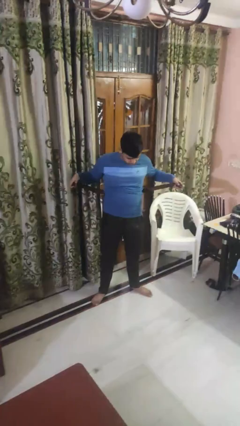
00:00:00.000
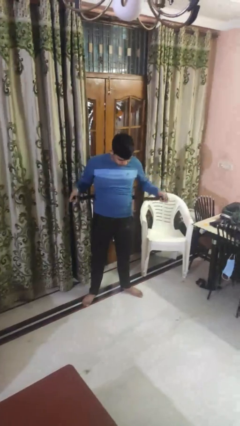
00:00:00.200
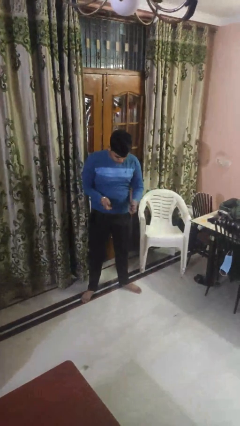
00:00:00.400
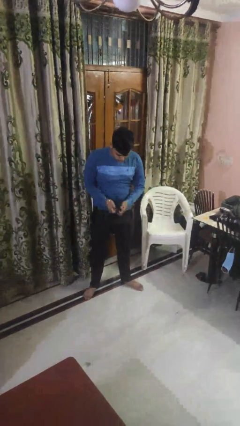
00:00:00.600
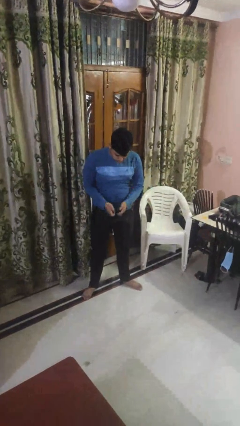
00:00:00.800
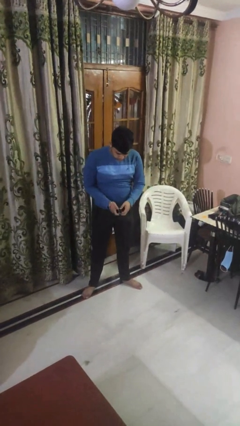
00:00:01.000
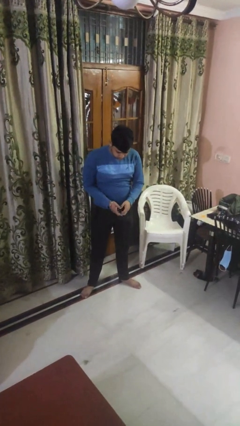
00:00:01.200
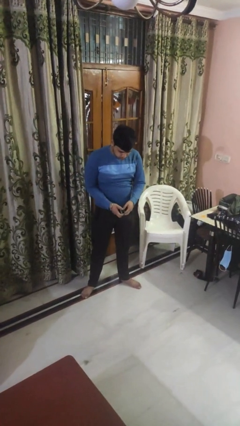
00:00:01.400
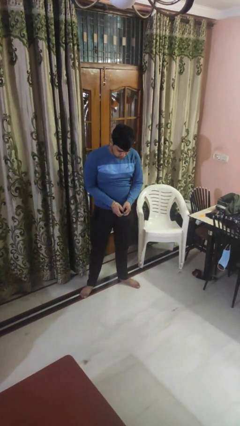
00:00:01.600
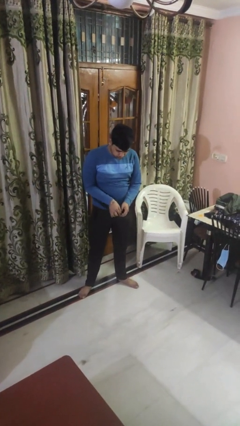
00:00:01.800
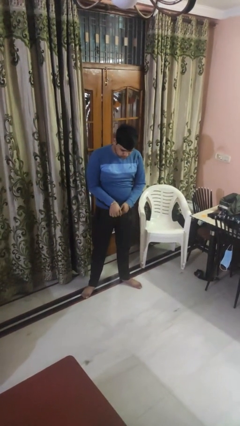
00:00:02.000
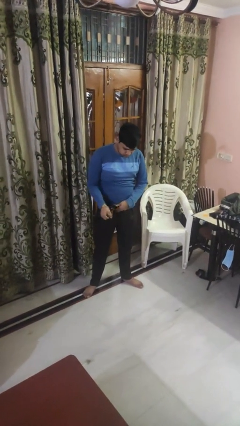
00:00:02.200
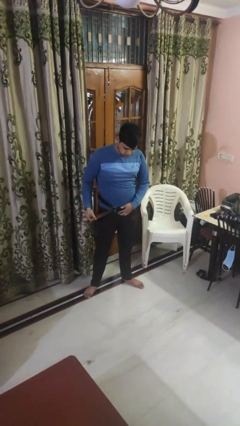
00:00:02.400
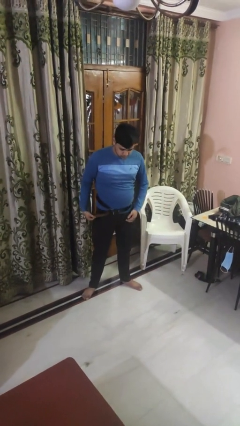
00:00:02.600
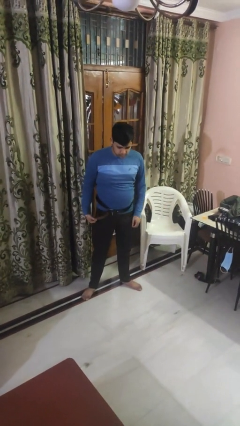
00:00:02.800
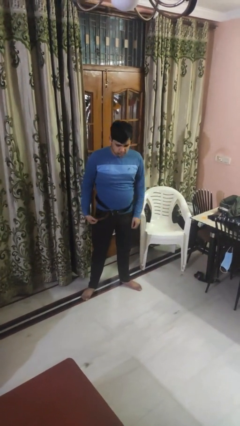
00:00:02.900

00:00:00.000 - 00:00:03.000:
person puts on belt

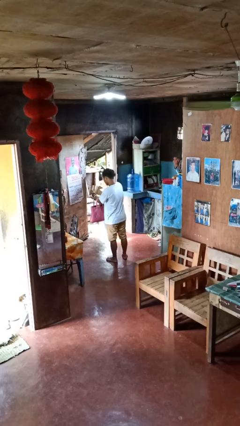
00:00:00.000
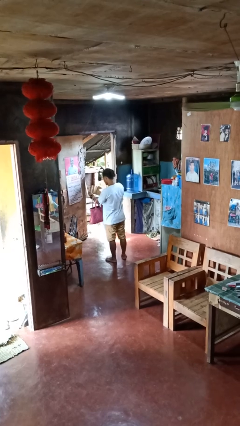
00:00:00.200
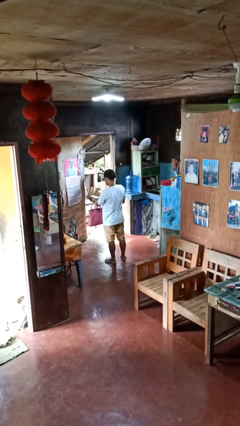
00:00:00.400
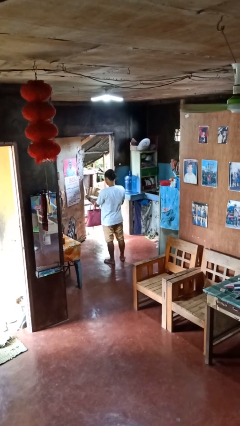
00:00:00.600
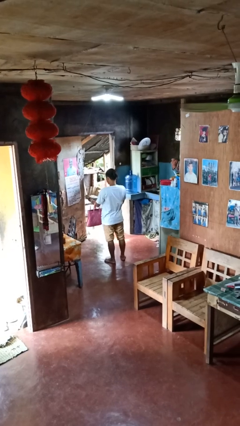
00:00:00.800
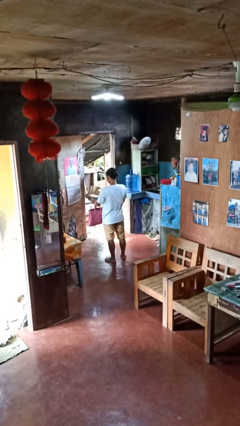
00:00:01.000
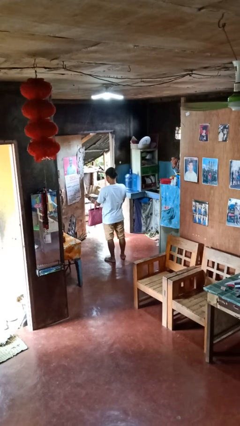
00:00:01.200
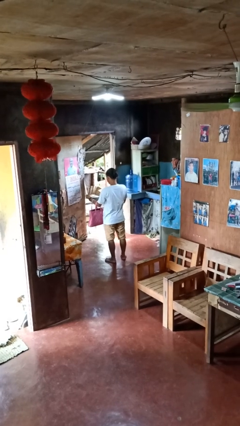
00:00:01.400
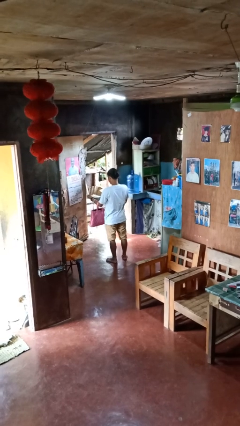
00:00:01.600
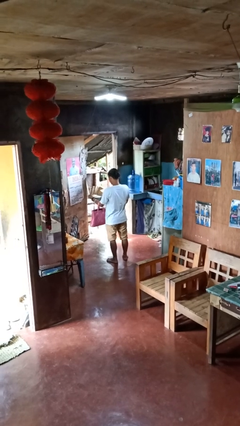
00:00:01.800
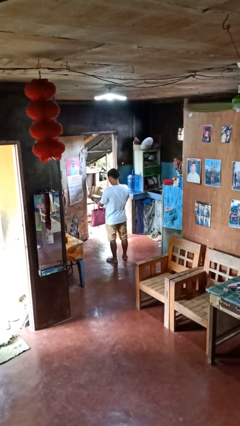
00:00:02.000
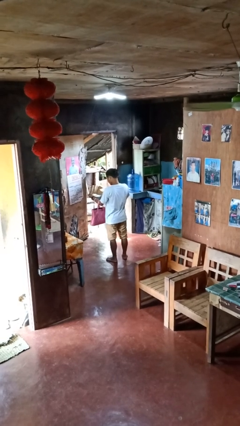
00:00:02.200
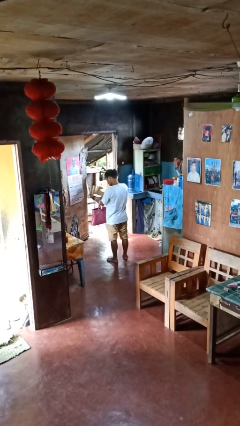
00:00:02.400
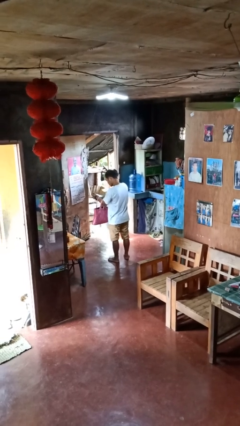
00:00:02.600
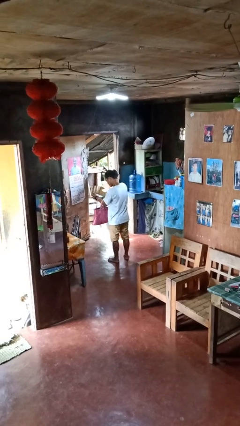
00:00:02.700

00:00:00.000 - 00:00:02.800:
person takes object from purse

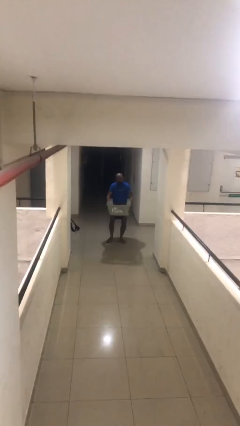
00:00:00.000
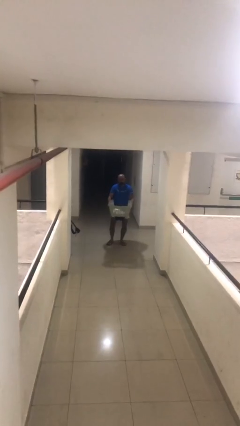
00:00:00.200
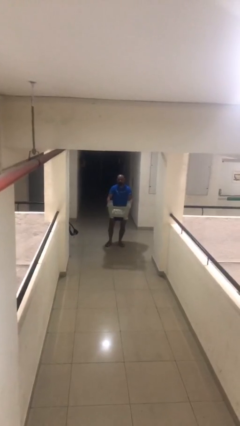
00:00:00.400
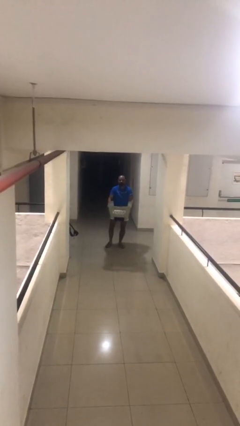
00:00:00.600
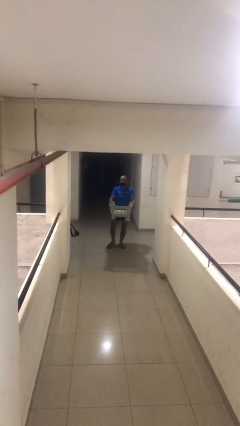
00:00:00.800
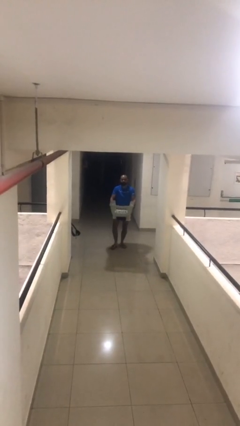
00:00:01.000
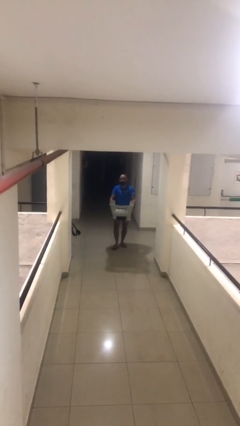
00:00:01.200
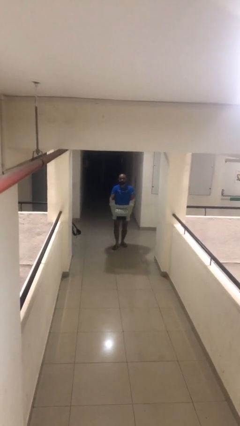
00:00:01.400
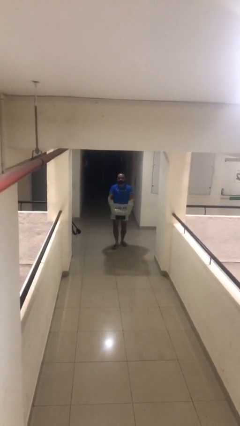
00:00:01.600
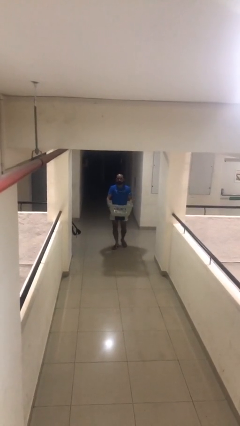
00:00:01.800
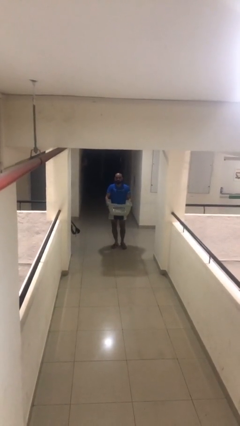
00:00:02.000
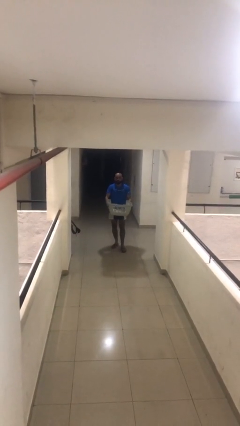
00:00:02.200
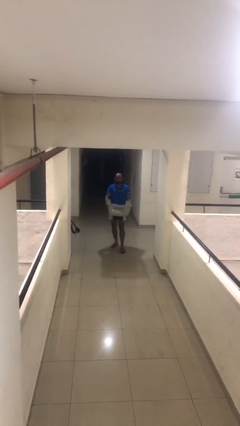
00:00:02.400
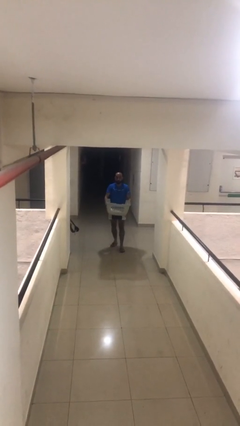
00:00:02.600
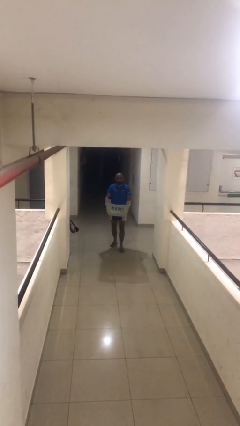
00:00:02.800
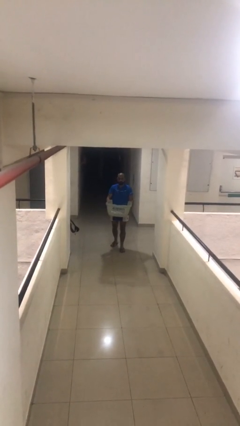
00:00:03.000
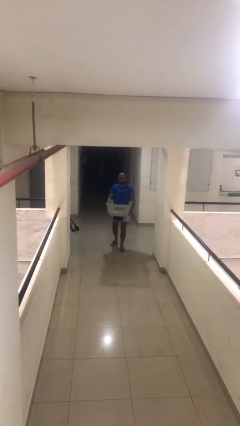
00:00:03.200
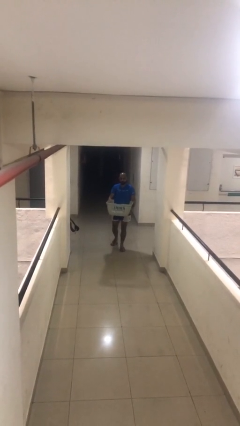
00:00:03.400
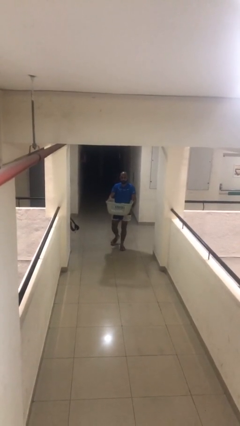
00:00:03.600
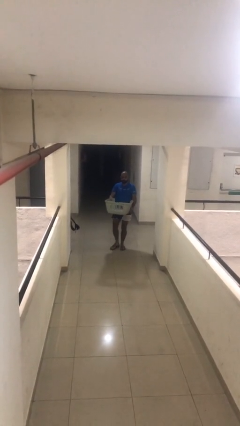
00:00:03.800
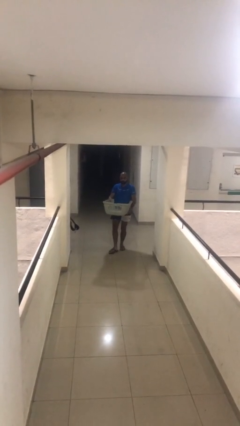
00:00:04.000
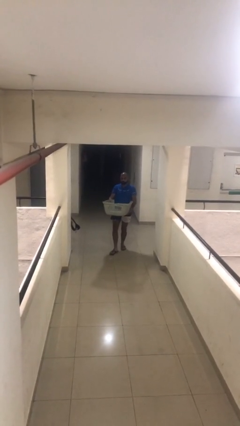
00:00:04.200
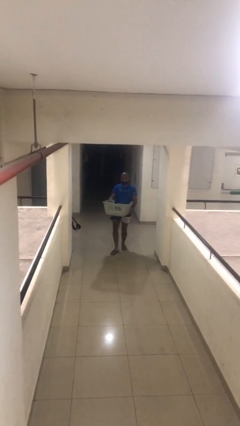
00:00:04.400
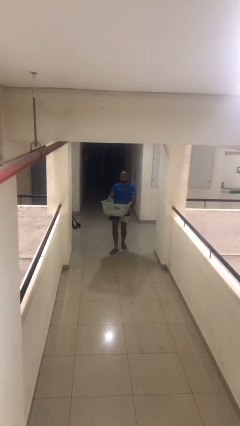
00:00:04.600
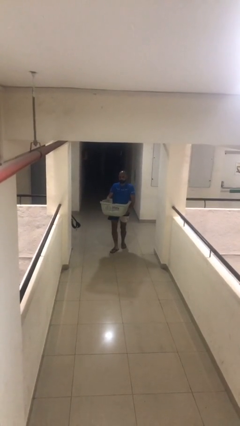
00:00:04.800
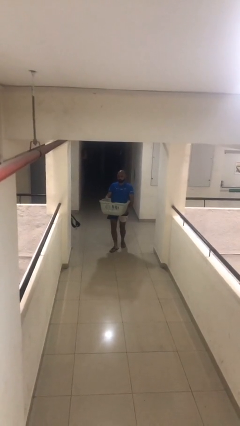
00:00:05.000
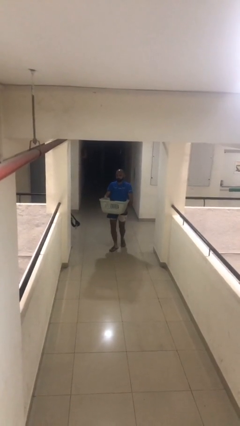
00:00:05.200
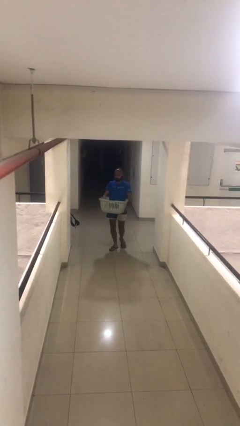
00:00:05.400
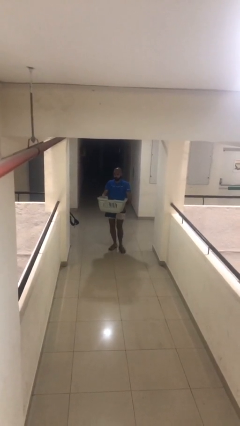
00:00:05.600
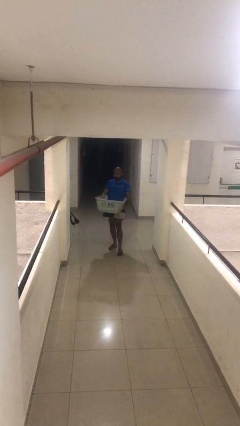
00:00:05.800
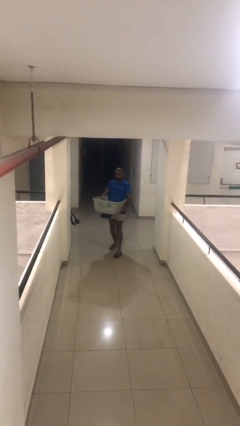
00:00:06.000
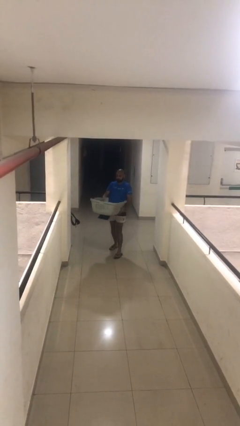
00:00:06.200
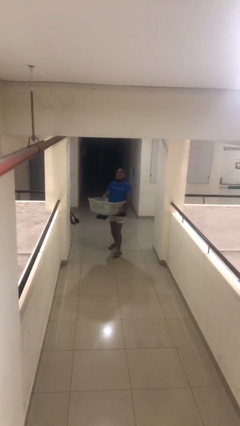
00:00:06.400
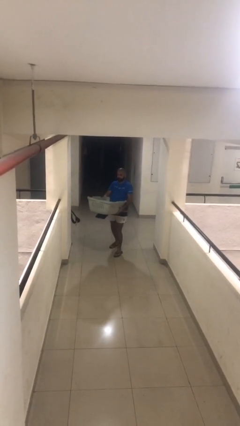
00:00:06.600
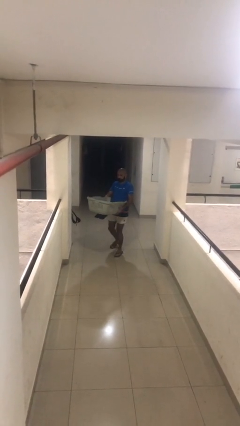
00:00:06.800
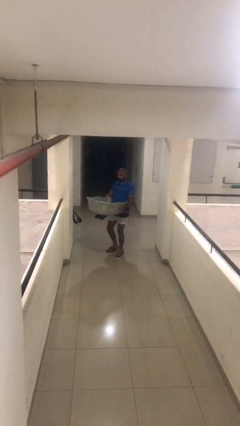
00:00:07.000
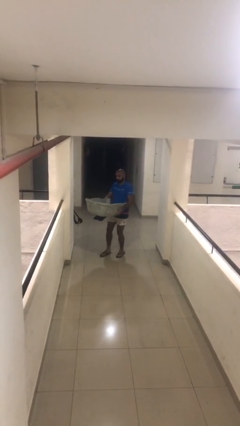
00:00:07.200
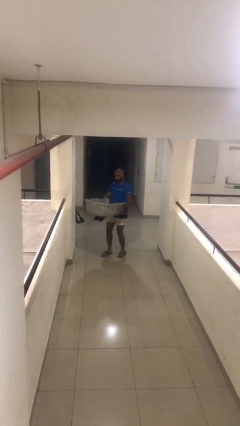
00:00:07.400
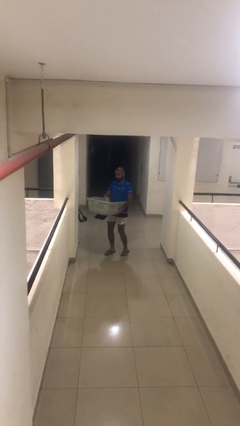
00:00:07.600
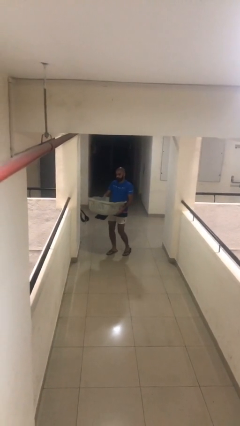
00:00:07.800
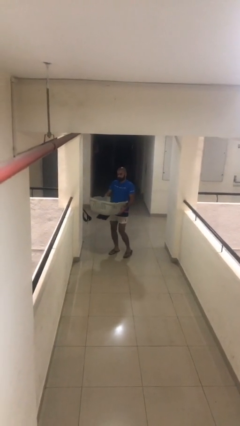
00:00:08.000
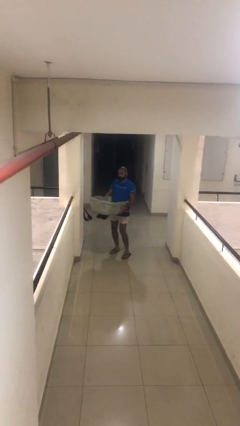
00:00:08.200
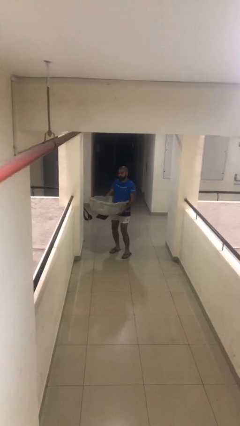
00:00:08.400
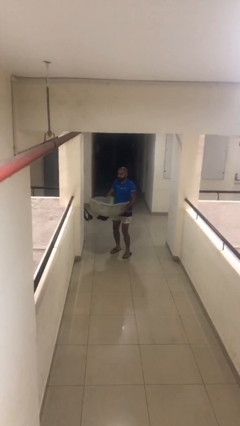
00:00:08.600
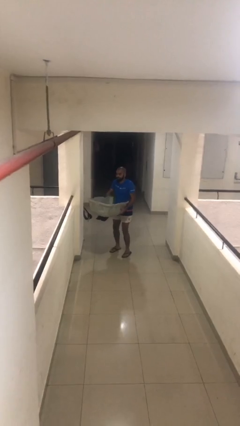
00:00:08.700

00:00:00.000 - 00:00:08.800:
person carries heavy object

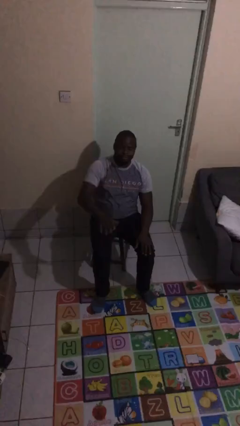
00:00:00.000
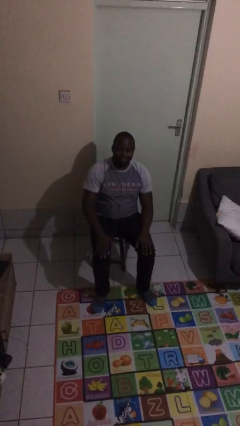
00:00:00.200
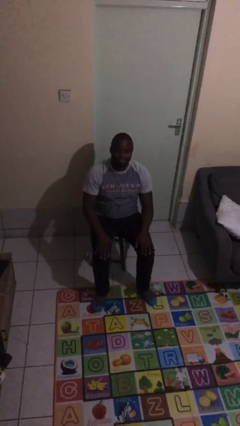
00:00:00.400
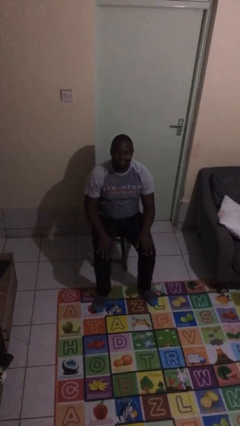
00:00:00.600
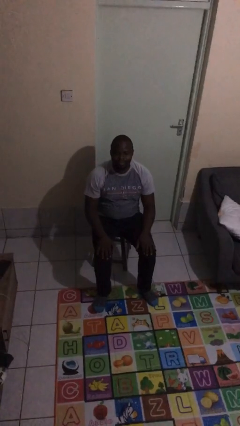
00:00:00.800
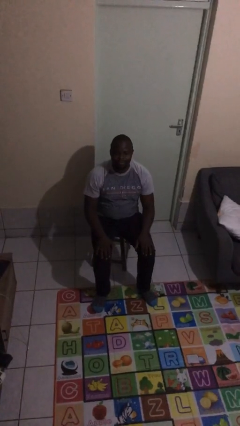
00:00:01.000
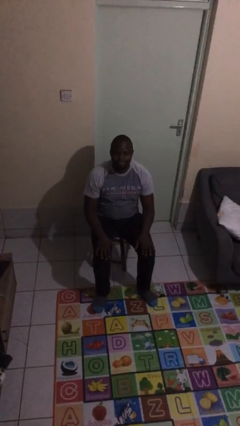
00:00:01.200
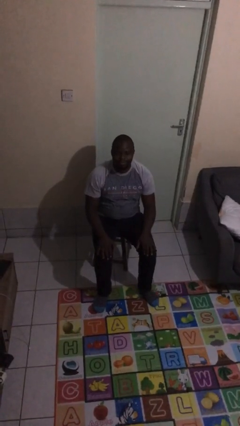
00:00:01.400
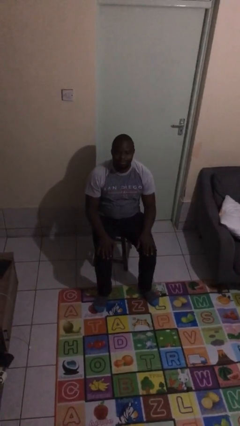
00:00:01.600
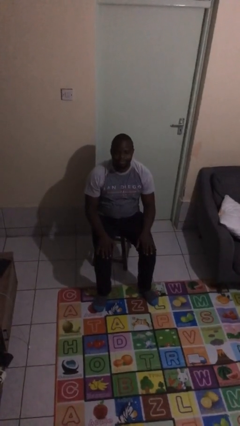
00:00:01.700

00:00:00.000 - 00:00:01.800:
person gestures lower hand

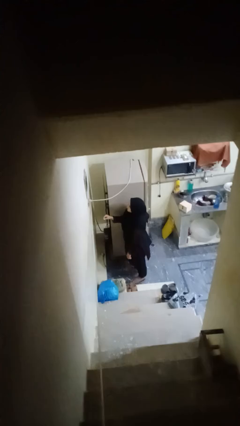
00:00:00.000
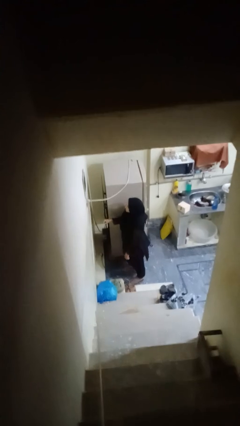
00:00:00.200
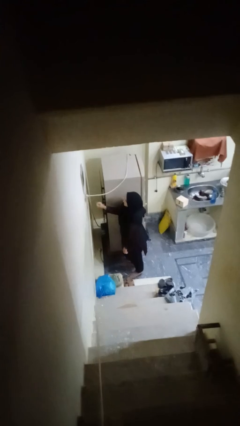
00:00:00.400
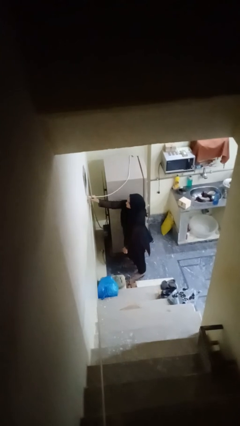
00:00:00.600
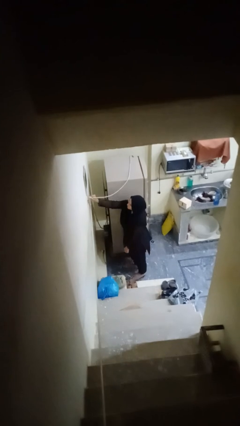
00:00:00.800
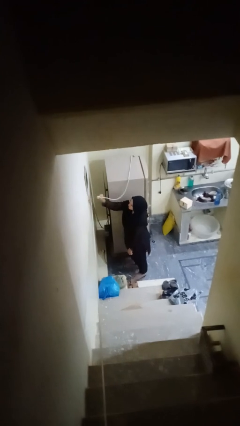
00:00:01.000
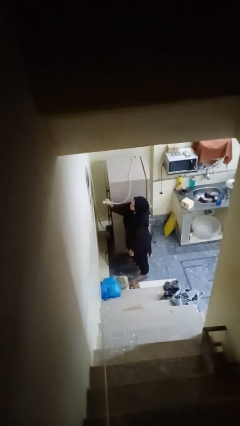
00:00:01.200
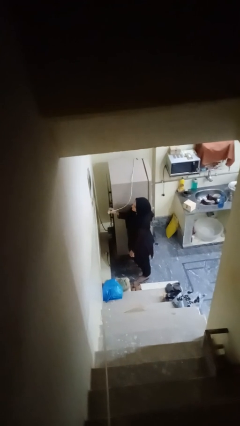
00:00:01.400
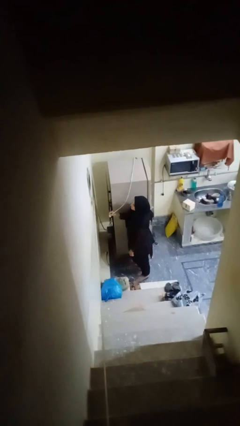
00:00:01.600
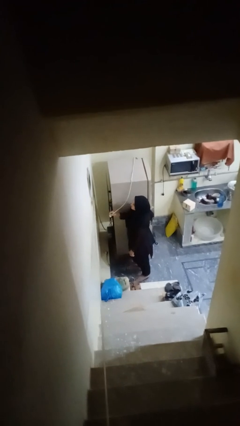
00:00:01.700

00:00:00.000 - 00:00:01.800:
person unplugs from electrical socket
